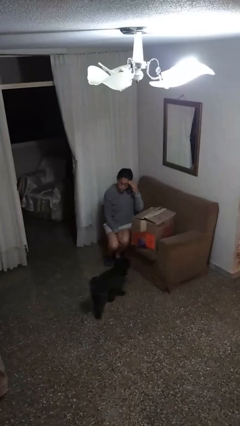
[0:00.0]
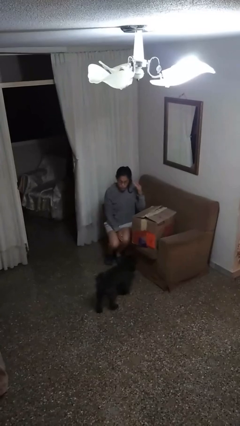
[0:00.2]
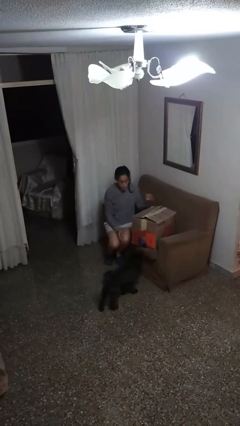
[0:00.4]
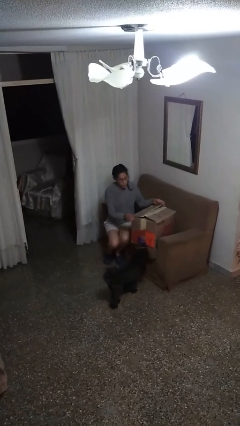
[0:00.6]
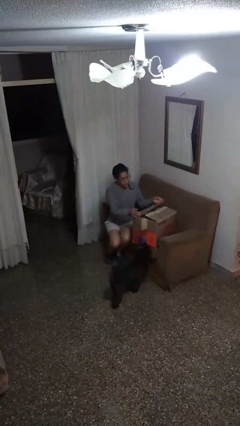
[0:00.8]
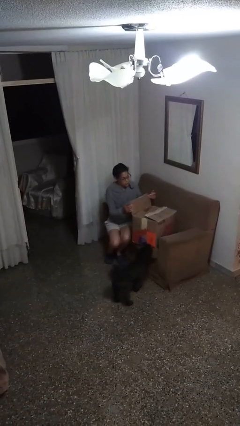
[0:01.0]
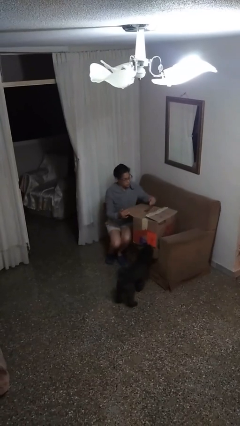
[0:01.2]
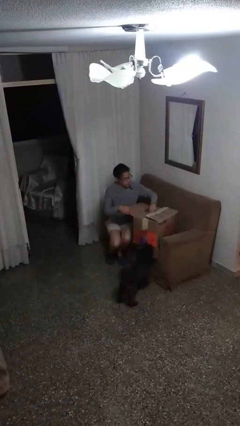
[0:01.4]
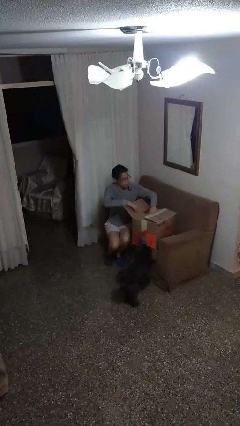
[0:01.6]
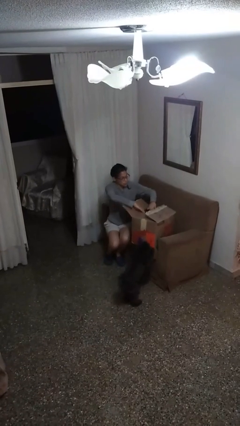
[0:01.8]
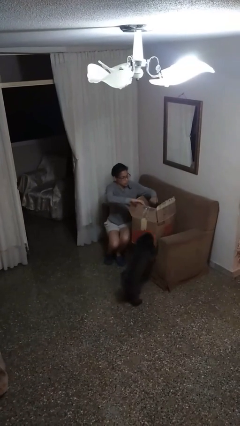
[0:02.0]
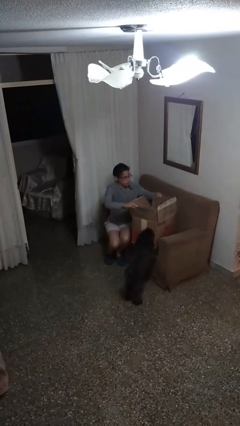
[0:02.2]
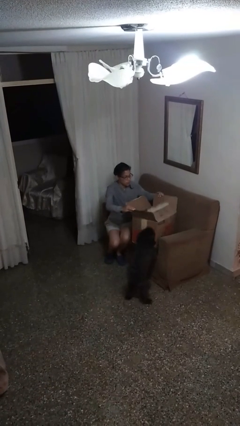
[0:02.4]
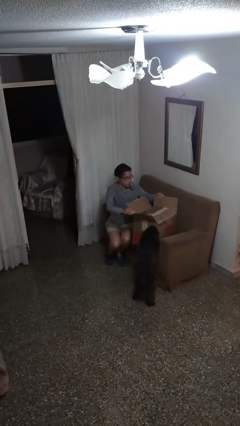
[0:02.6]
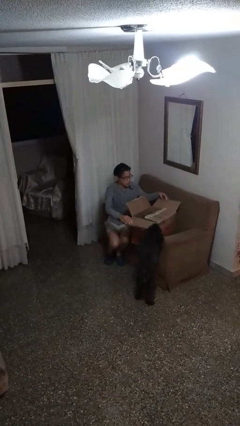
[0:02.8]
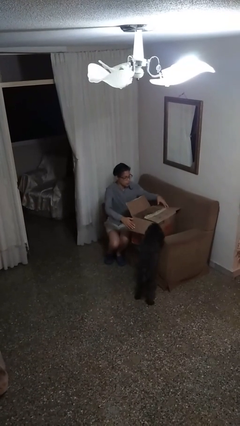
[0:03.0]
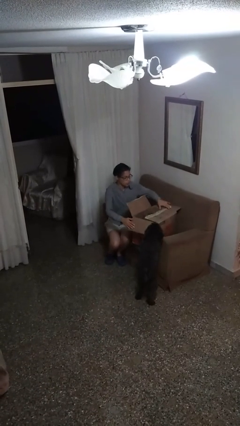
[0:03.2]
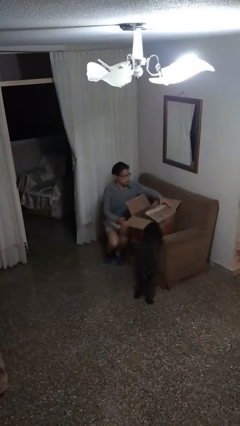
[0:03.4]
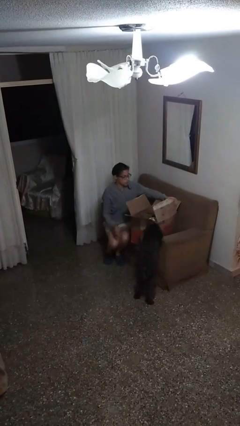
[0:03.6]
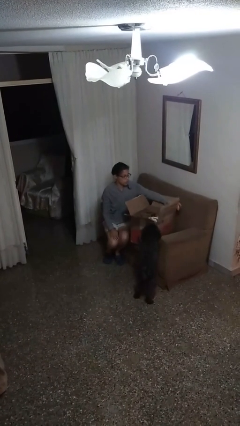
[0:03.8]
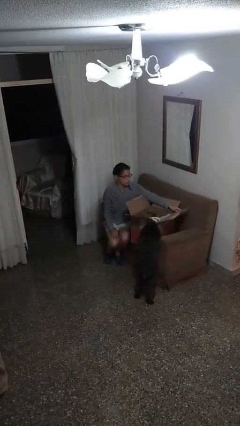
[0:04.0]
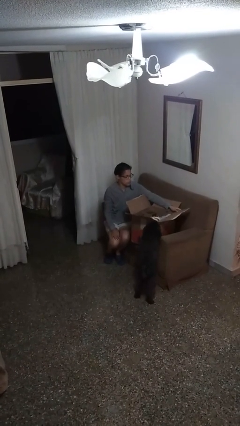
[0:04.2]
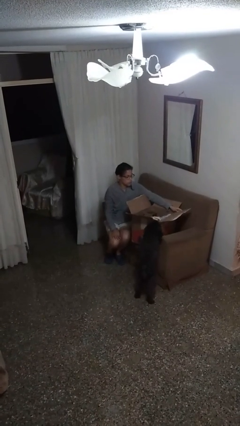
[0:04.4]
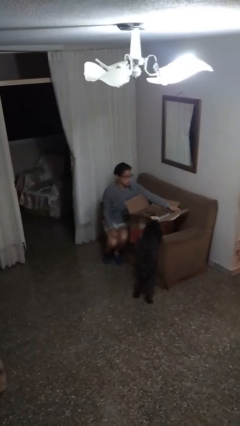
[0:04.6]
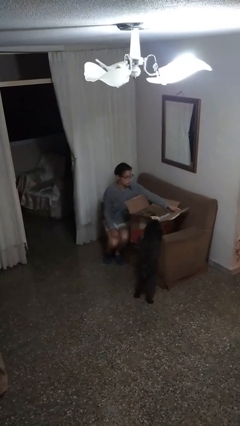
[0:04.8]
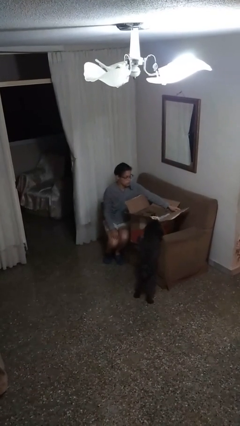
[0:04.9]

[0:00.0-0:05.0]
person opens box

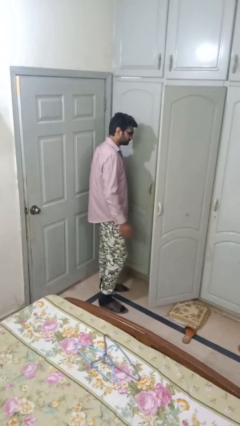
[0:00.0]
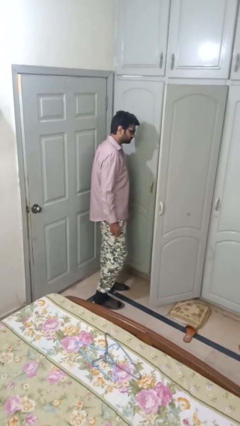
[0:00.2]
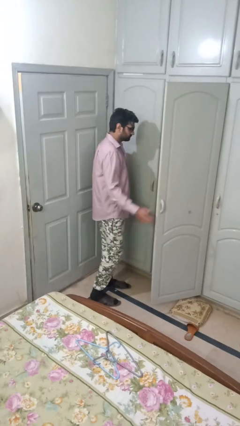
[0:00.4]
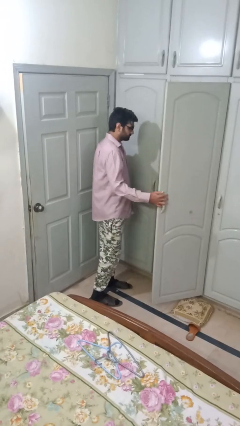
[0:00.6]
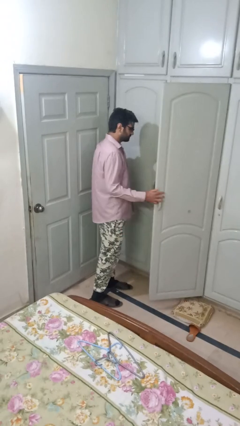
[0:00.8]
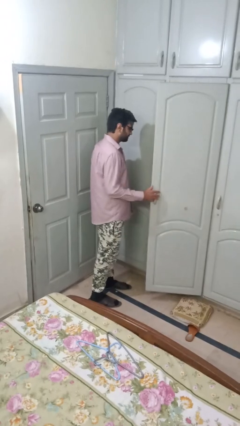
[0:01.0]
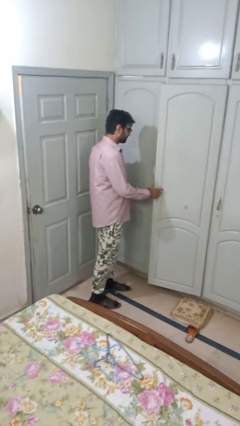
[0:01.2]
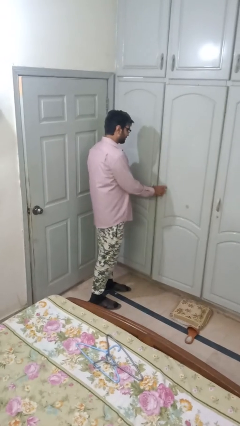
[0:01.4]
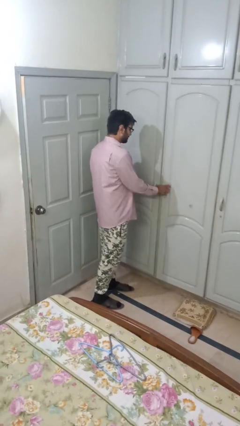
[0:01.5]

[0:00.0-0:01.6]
person closes closet door

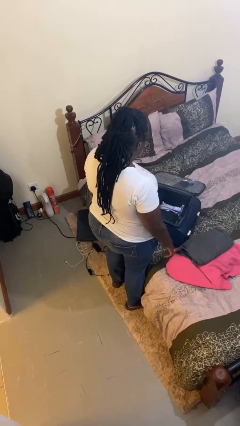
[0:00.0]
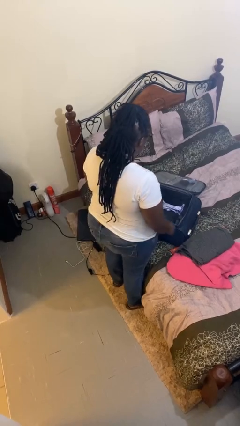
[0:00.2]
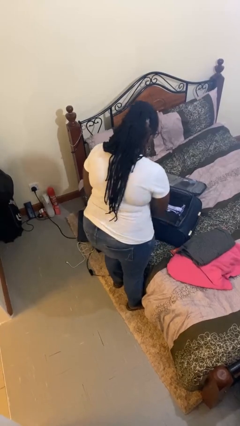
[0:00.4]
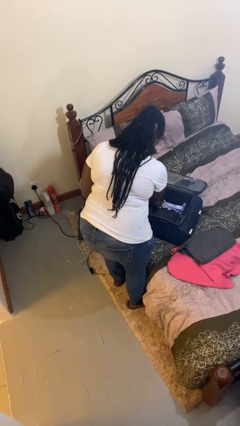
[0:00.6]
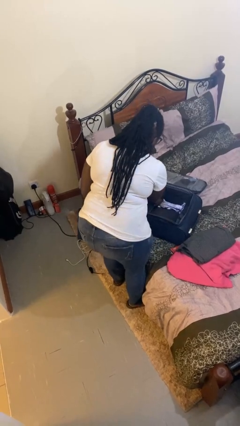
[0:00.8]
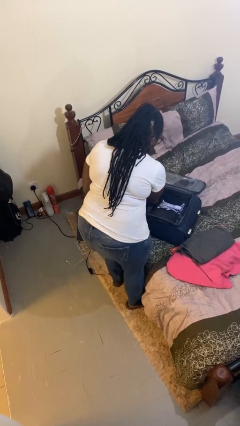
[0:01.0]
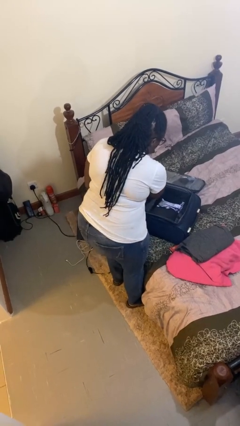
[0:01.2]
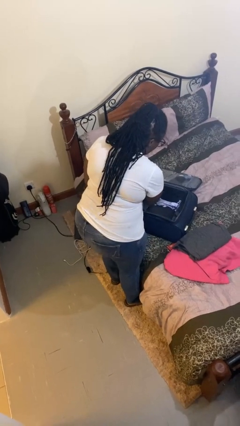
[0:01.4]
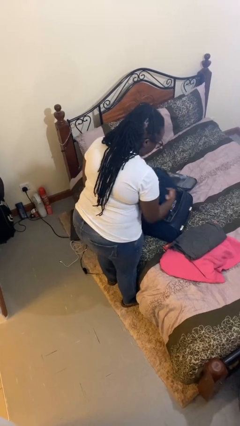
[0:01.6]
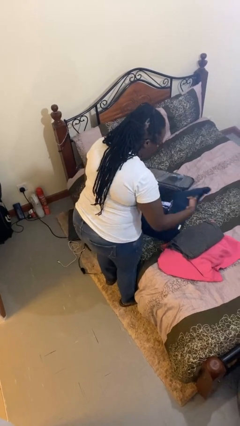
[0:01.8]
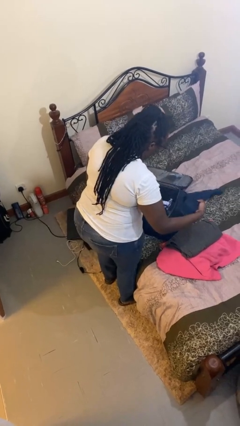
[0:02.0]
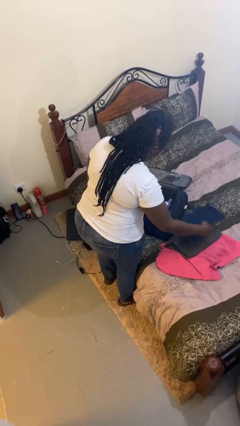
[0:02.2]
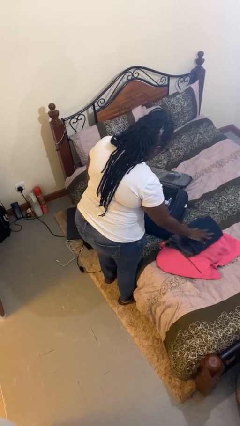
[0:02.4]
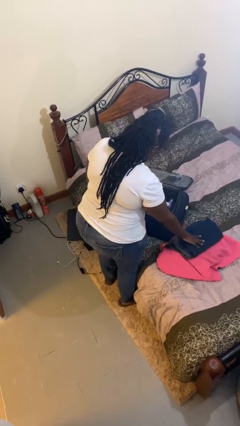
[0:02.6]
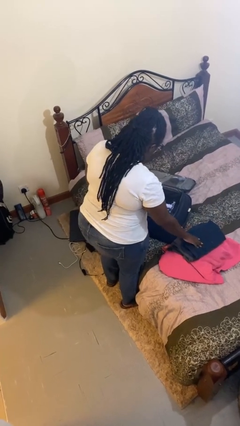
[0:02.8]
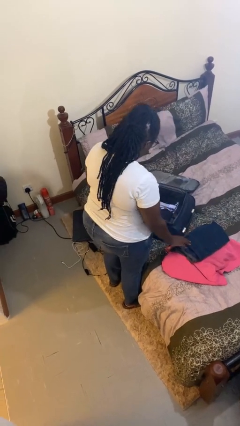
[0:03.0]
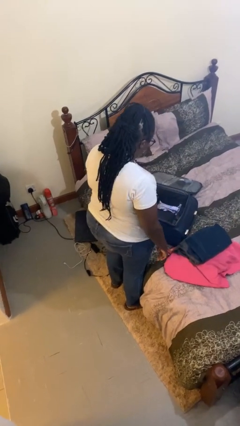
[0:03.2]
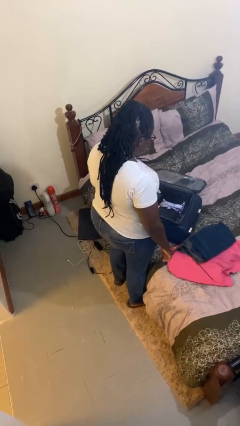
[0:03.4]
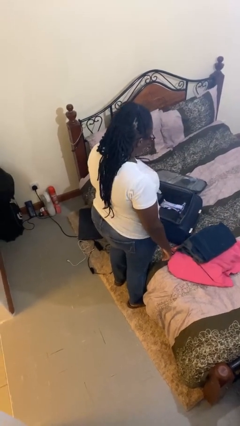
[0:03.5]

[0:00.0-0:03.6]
person unloads clothes from suitcase

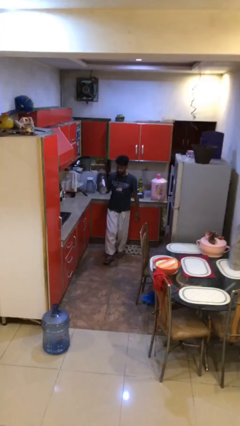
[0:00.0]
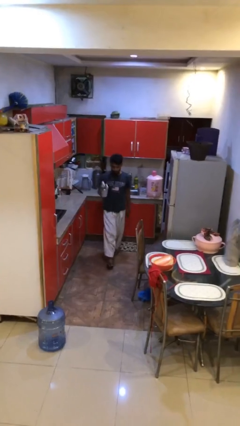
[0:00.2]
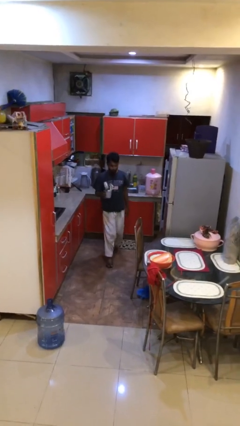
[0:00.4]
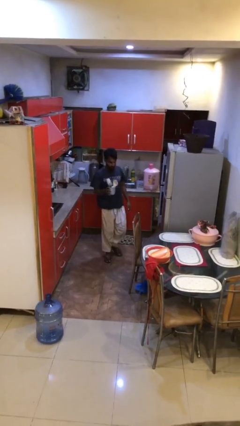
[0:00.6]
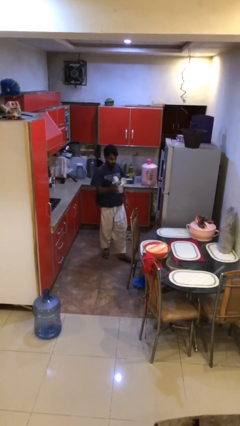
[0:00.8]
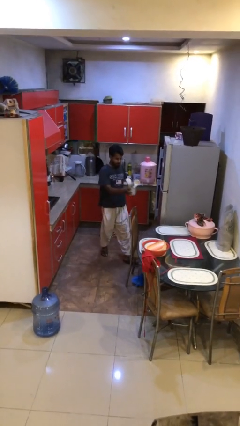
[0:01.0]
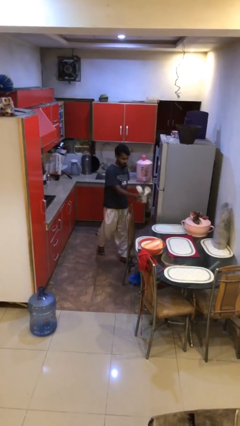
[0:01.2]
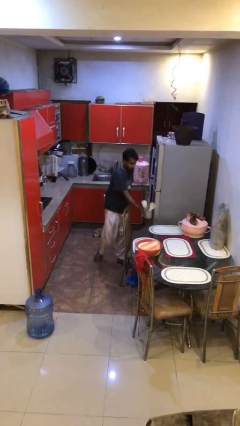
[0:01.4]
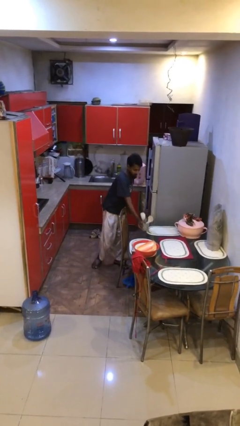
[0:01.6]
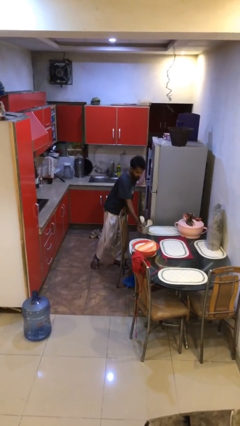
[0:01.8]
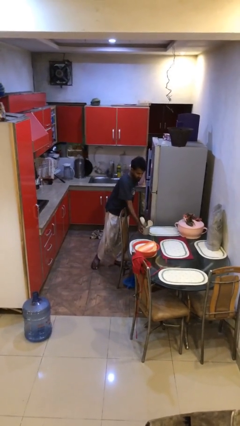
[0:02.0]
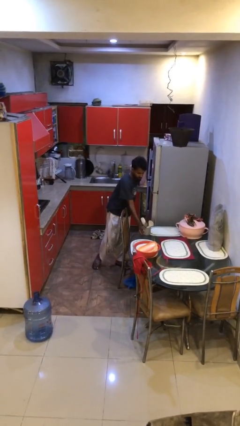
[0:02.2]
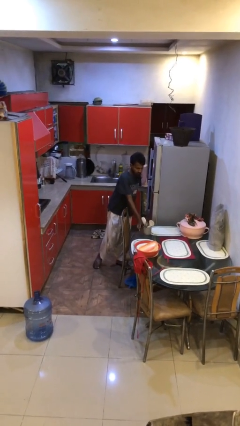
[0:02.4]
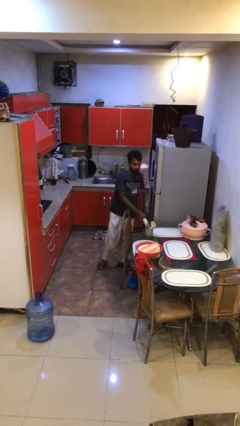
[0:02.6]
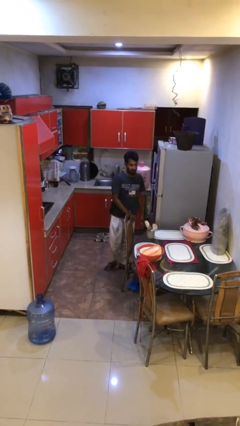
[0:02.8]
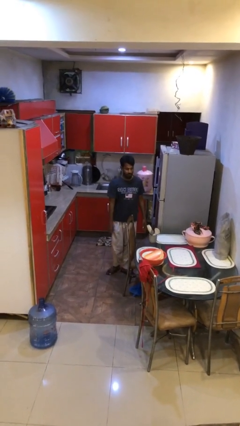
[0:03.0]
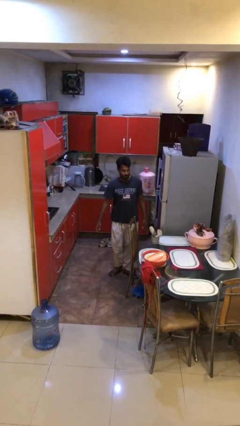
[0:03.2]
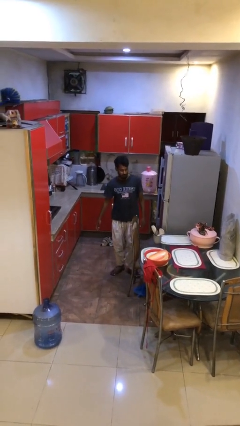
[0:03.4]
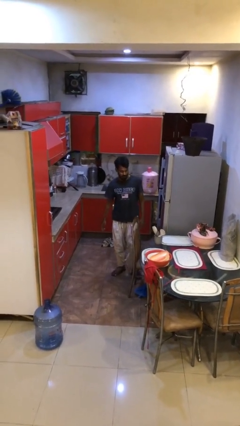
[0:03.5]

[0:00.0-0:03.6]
person puts down object on table

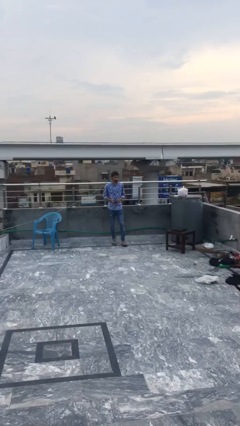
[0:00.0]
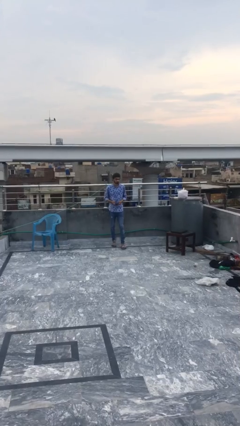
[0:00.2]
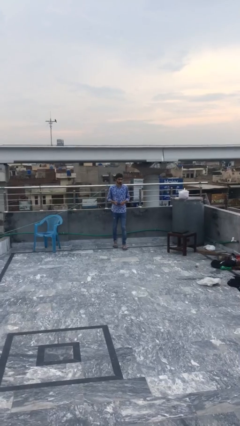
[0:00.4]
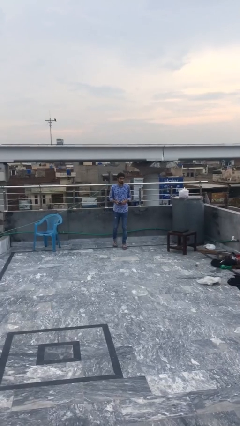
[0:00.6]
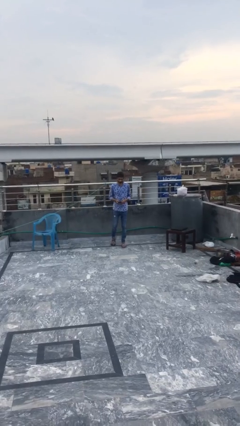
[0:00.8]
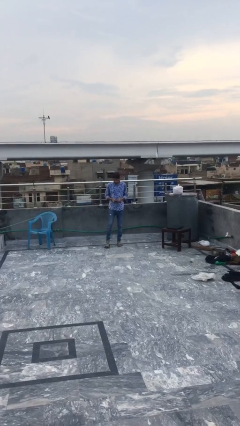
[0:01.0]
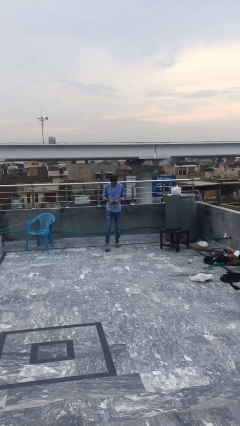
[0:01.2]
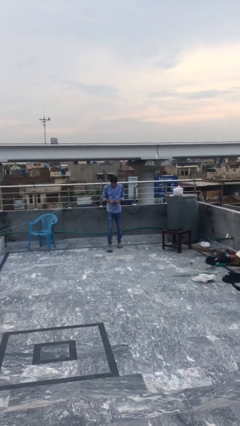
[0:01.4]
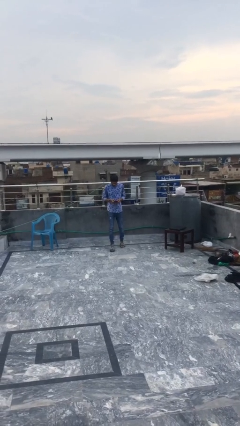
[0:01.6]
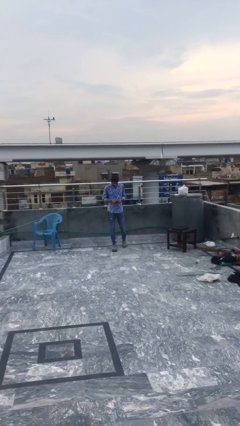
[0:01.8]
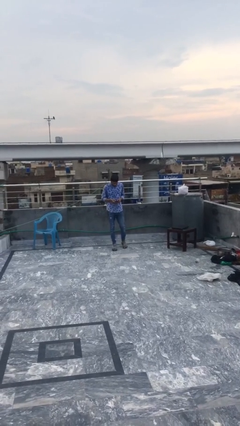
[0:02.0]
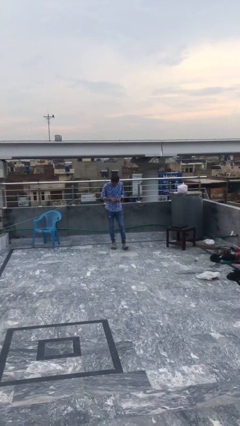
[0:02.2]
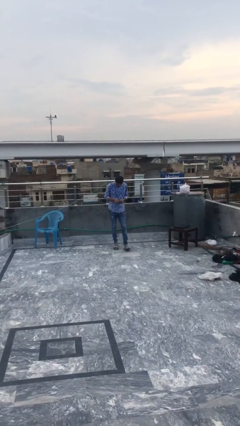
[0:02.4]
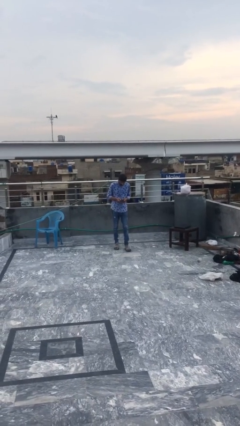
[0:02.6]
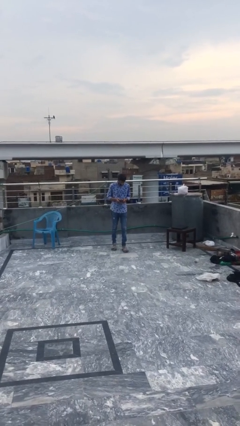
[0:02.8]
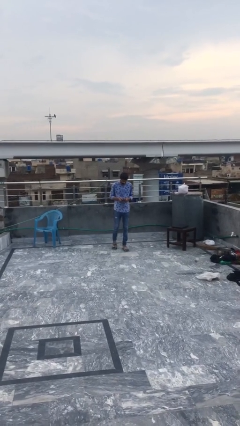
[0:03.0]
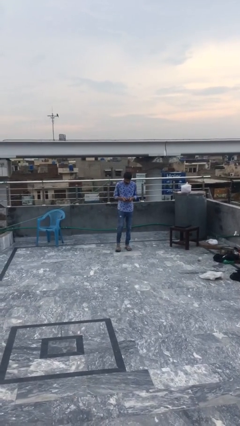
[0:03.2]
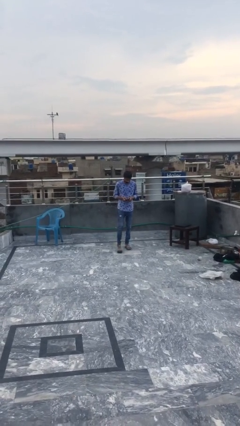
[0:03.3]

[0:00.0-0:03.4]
person texts on phone

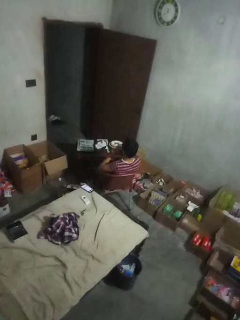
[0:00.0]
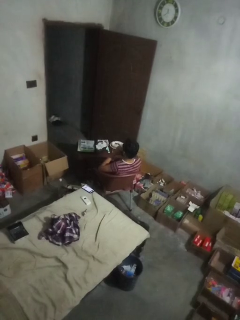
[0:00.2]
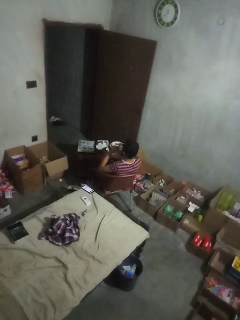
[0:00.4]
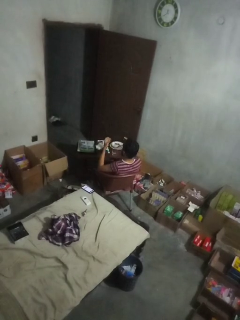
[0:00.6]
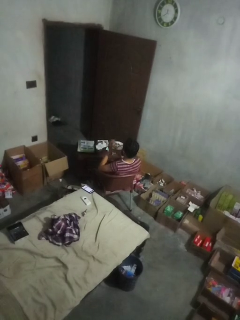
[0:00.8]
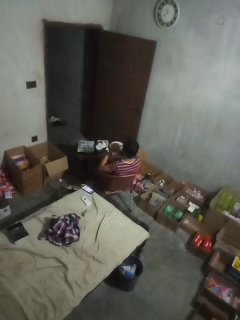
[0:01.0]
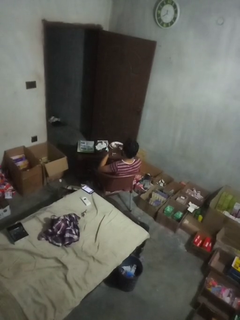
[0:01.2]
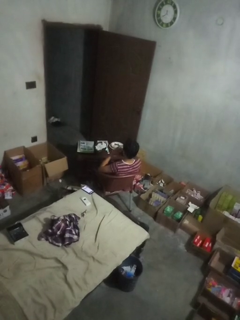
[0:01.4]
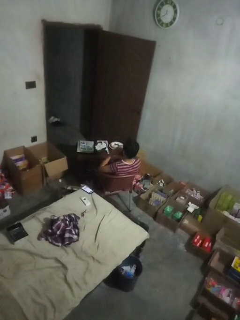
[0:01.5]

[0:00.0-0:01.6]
person claps hands
